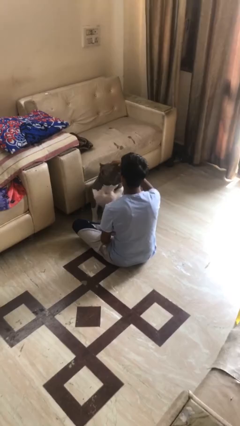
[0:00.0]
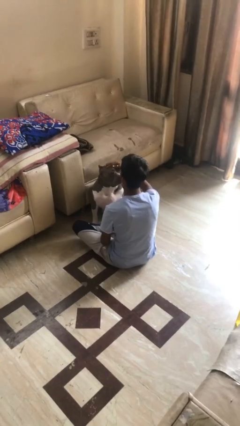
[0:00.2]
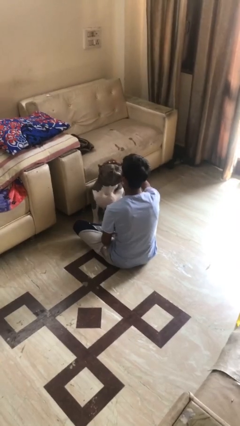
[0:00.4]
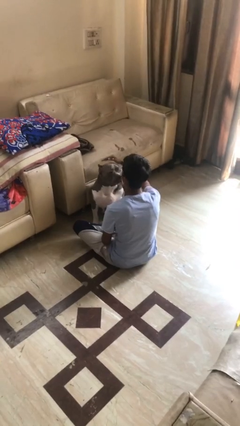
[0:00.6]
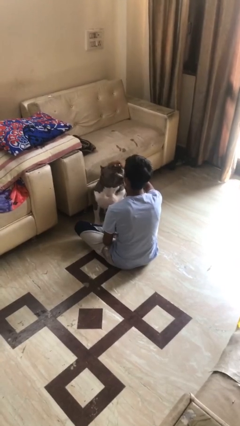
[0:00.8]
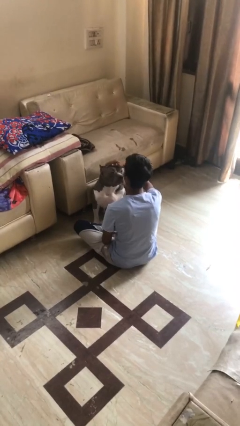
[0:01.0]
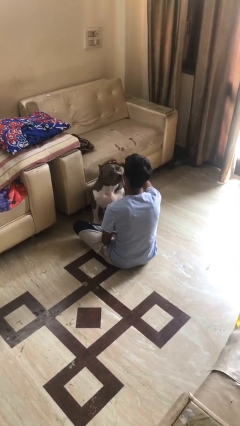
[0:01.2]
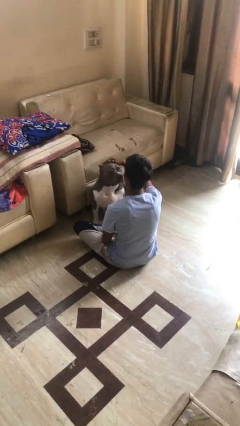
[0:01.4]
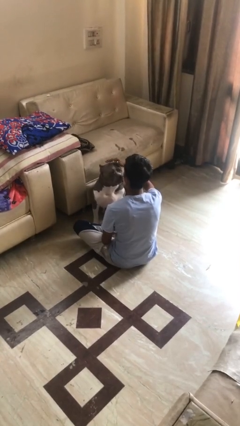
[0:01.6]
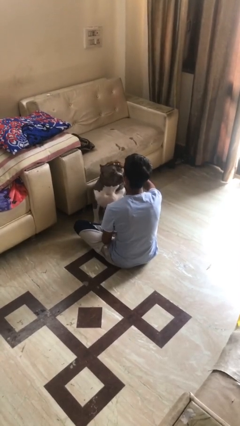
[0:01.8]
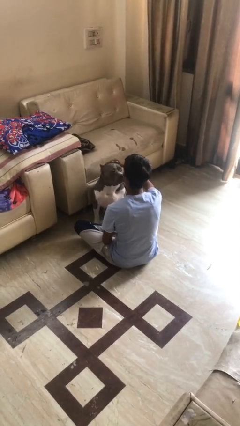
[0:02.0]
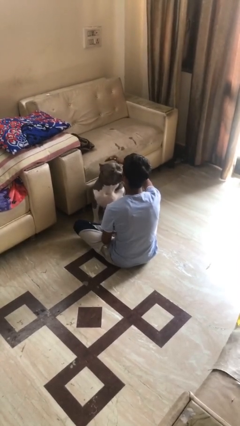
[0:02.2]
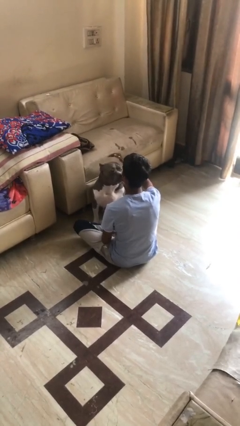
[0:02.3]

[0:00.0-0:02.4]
person pets dog

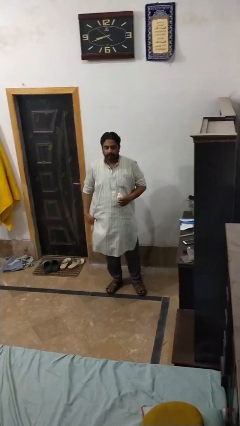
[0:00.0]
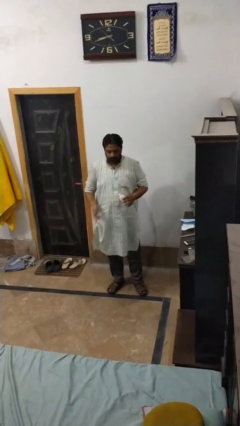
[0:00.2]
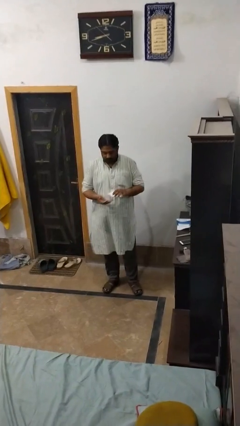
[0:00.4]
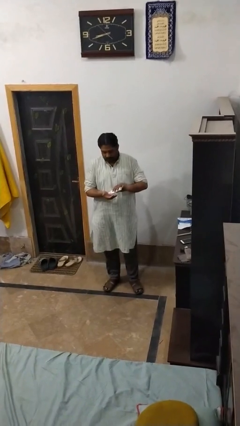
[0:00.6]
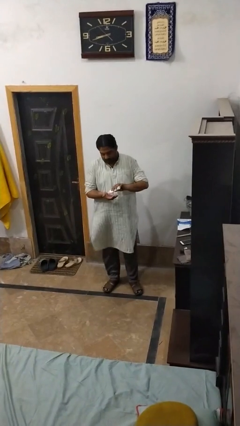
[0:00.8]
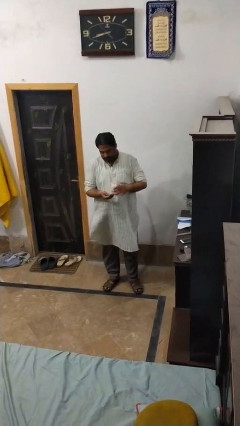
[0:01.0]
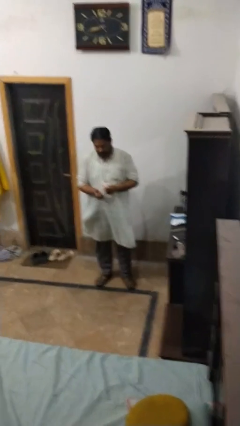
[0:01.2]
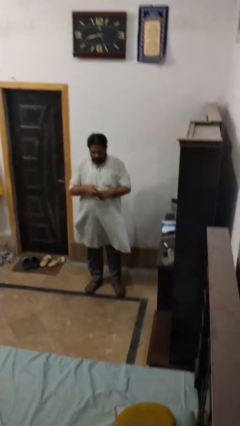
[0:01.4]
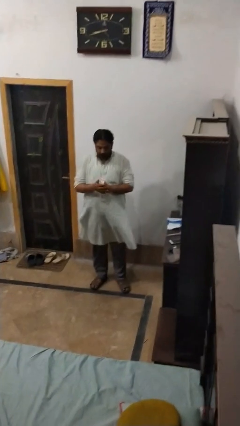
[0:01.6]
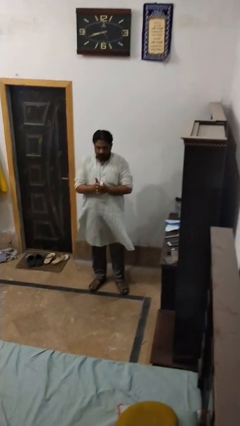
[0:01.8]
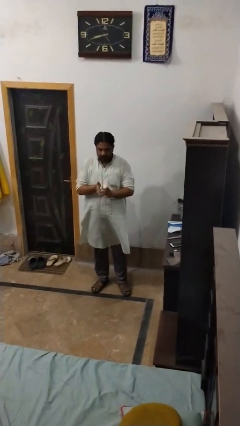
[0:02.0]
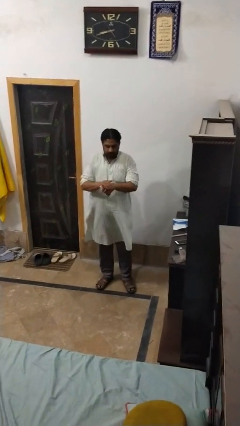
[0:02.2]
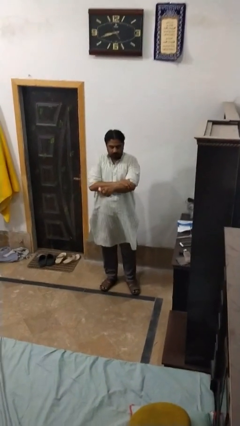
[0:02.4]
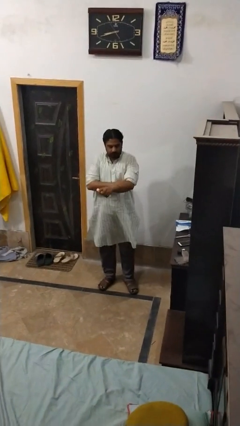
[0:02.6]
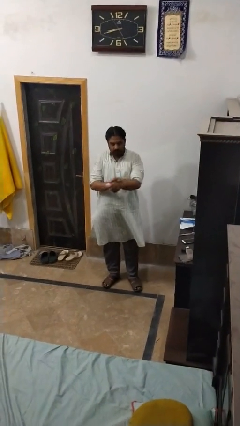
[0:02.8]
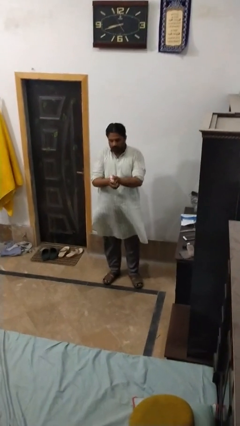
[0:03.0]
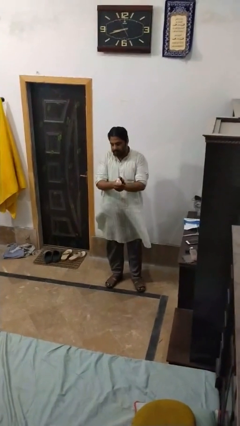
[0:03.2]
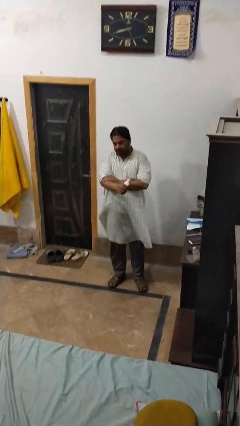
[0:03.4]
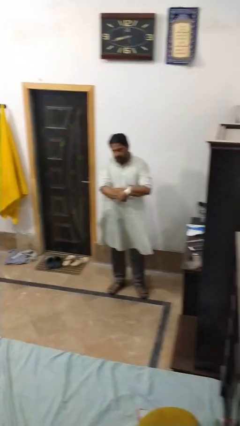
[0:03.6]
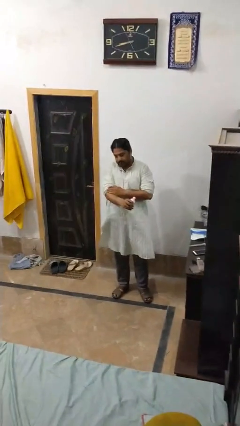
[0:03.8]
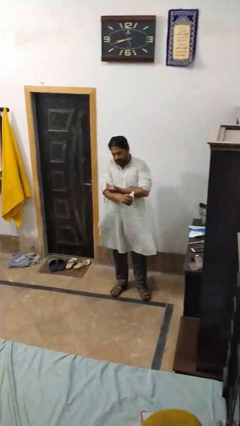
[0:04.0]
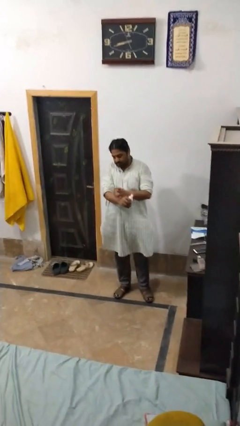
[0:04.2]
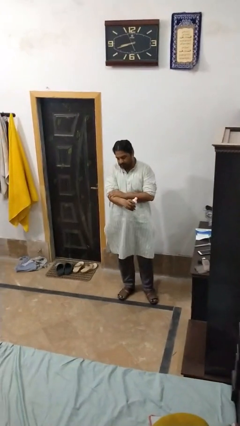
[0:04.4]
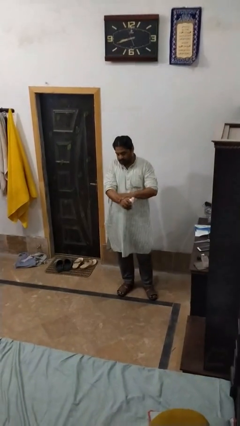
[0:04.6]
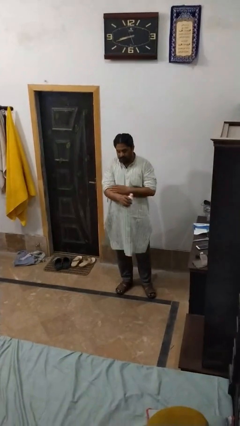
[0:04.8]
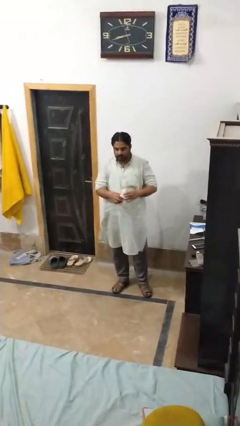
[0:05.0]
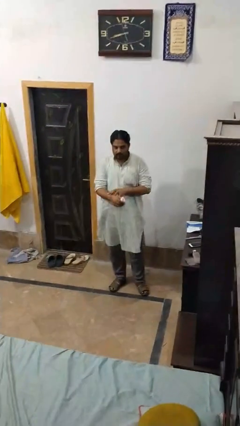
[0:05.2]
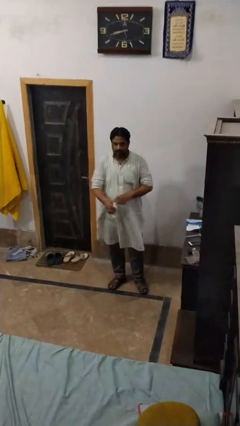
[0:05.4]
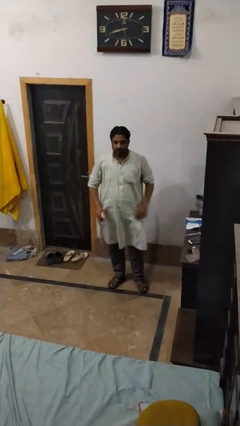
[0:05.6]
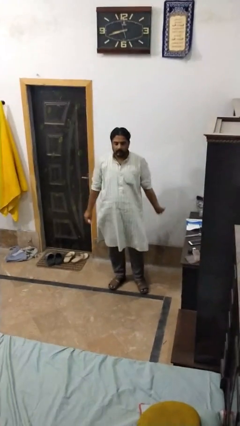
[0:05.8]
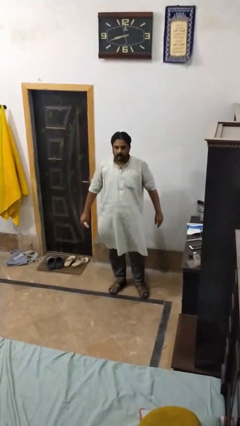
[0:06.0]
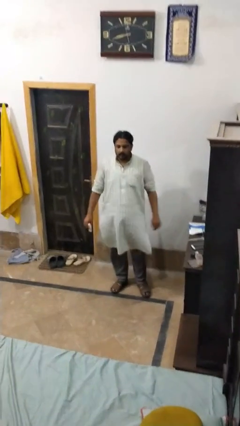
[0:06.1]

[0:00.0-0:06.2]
person applies sunscreen

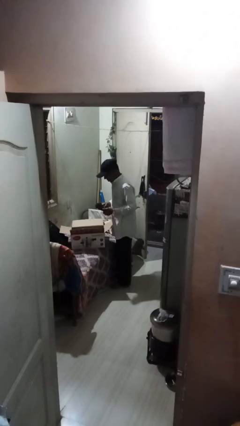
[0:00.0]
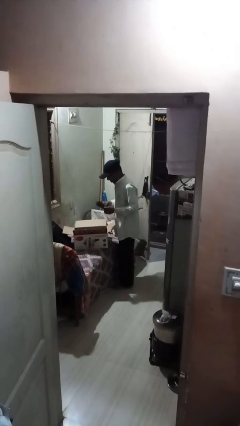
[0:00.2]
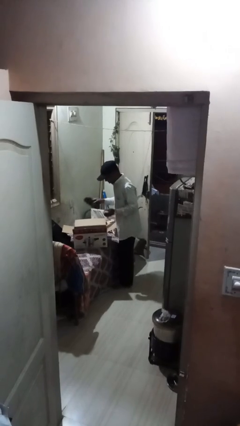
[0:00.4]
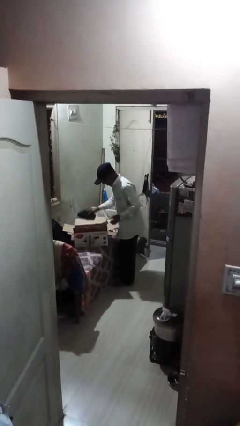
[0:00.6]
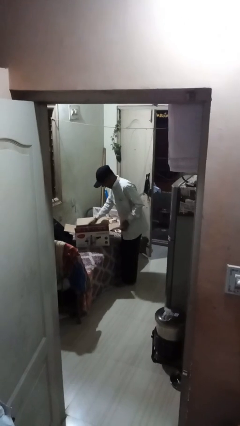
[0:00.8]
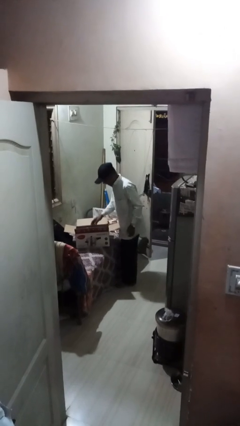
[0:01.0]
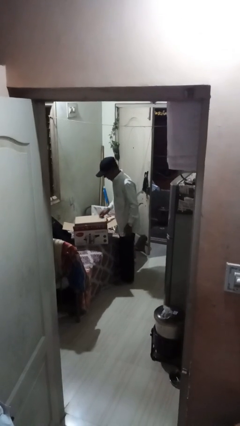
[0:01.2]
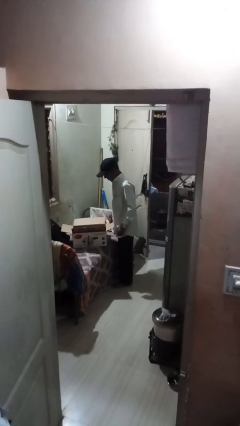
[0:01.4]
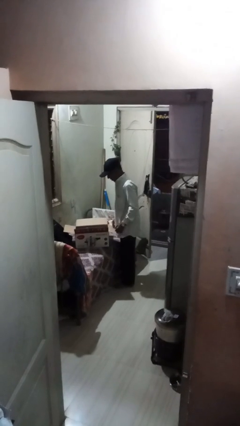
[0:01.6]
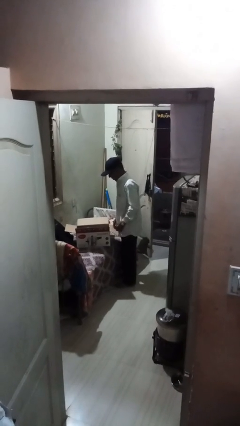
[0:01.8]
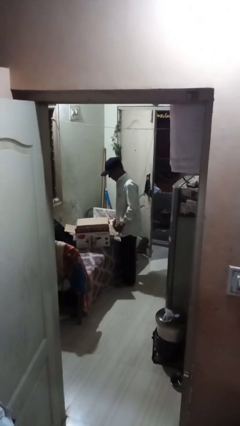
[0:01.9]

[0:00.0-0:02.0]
person puts object into box

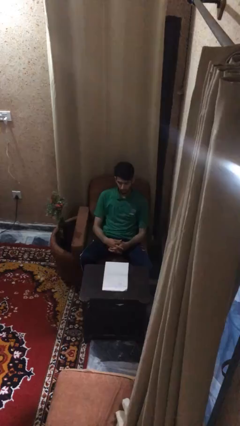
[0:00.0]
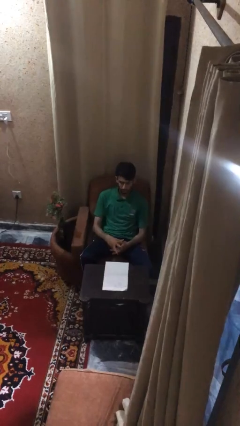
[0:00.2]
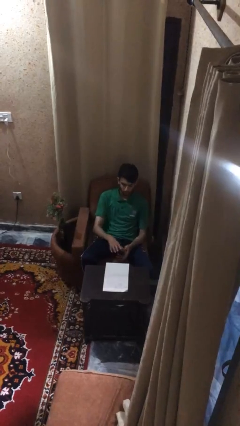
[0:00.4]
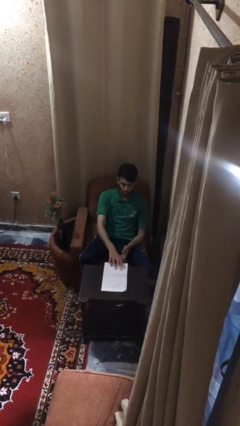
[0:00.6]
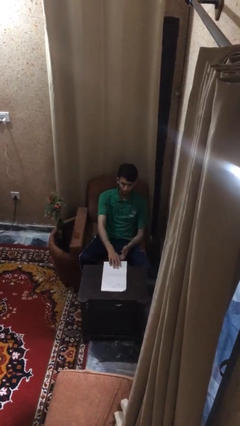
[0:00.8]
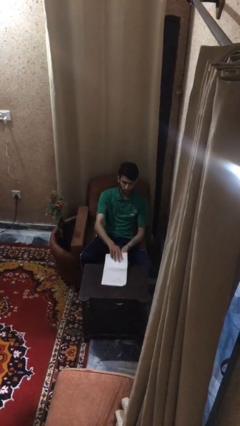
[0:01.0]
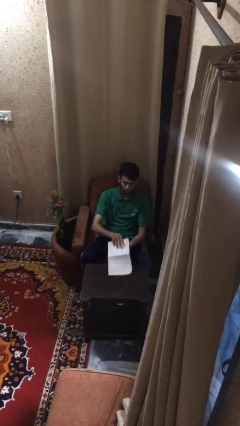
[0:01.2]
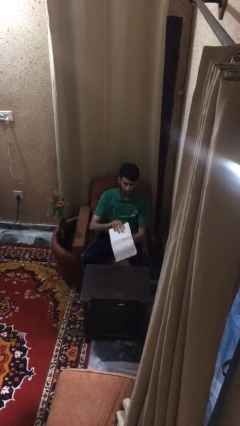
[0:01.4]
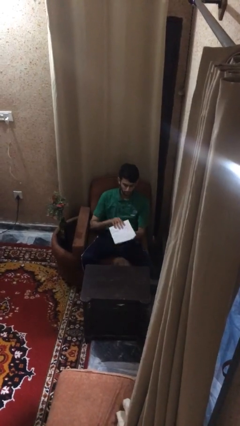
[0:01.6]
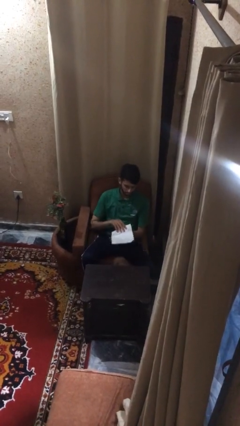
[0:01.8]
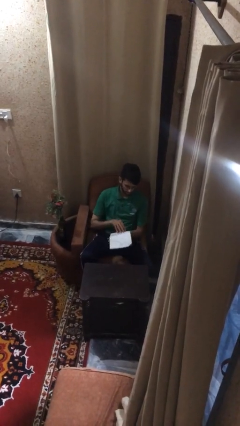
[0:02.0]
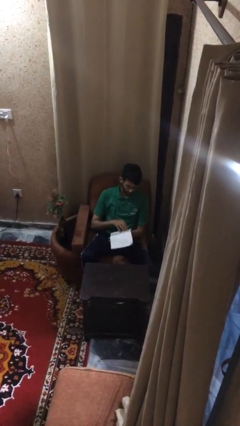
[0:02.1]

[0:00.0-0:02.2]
person picks up object from table

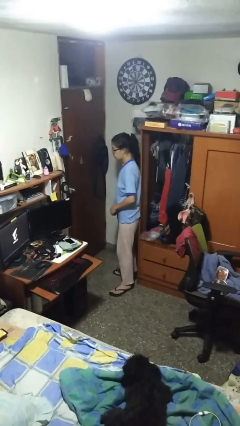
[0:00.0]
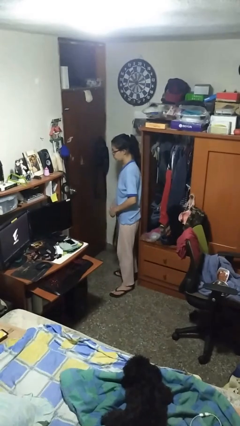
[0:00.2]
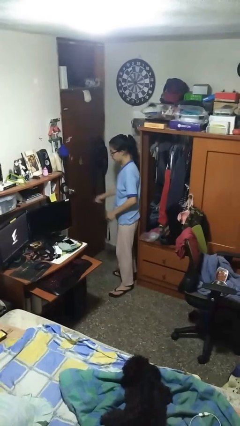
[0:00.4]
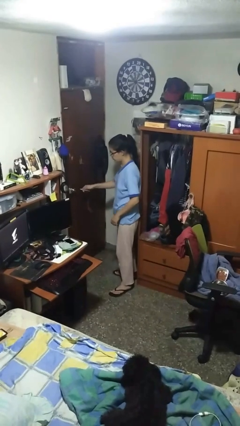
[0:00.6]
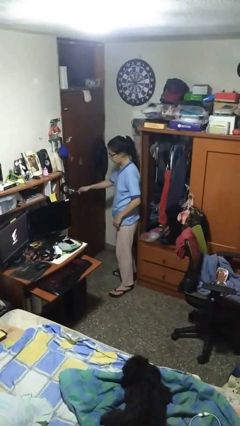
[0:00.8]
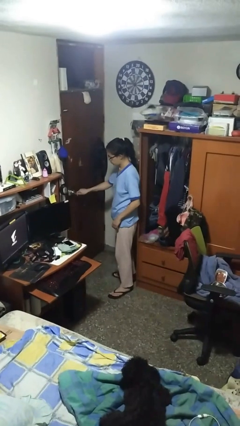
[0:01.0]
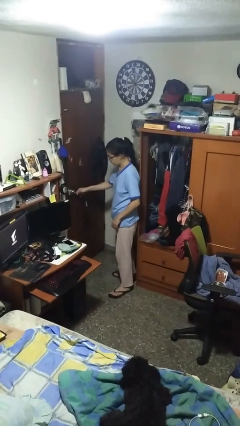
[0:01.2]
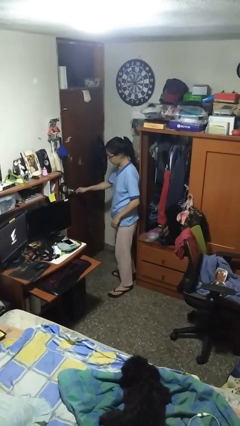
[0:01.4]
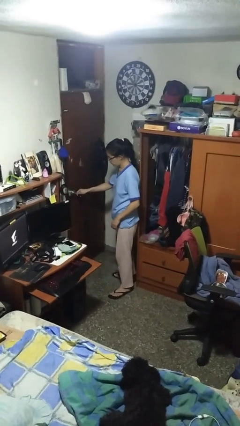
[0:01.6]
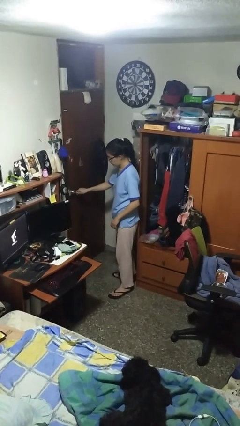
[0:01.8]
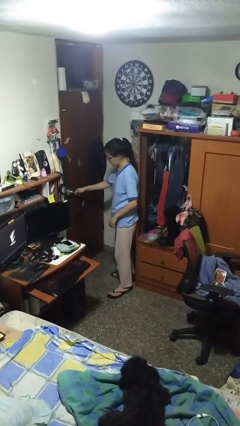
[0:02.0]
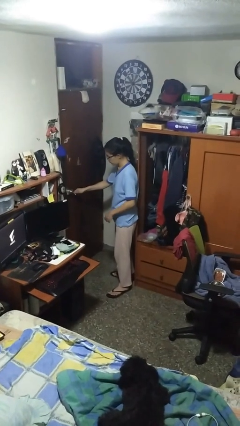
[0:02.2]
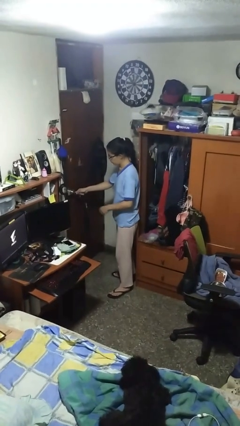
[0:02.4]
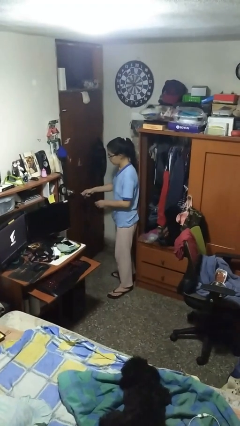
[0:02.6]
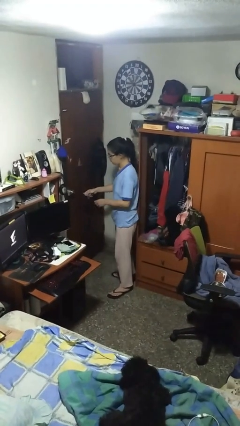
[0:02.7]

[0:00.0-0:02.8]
person unlocks door with keys

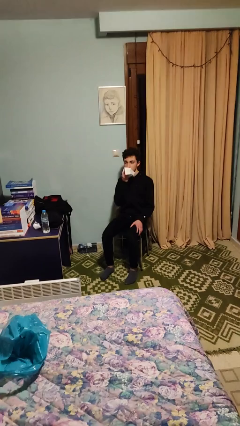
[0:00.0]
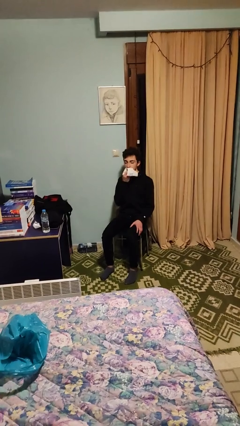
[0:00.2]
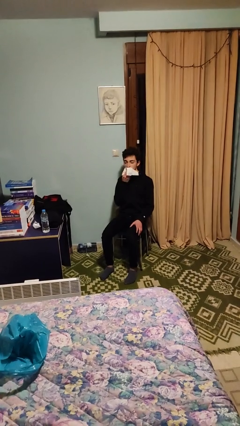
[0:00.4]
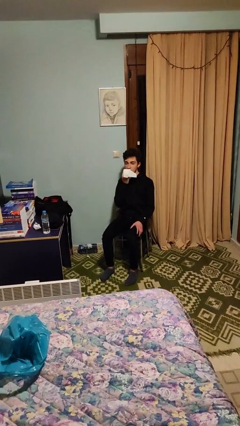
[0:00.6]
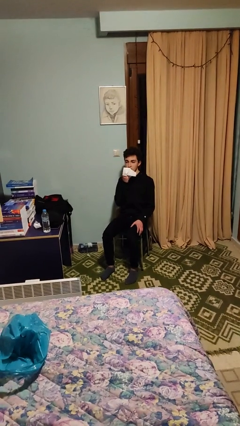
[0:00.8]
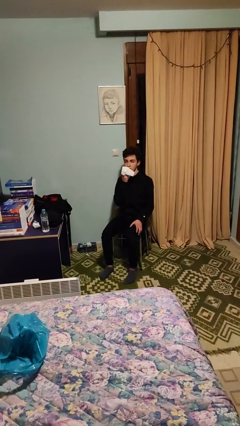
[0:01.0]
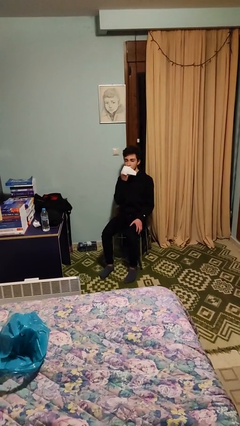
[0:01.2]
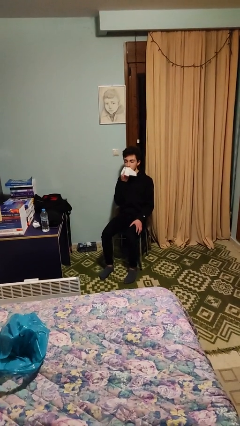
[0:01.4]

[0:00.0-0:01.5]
person wipes mouth with napkin

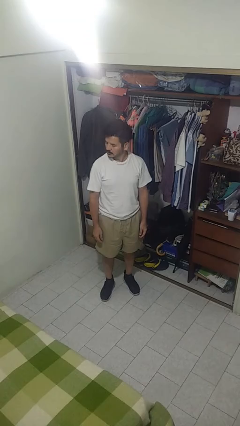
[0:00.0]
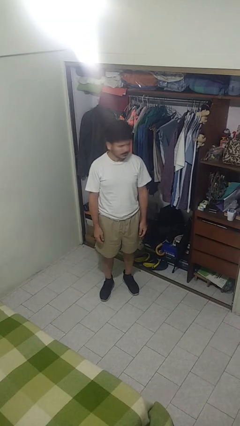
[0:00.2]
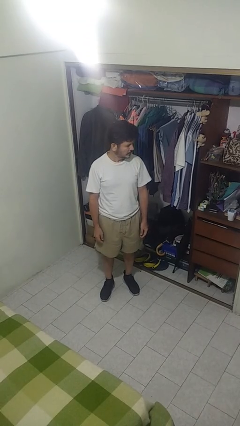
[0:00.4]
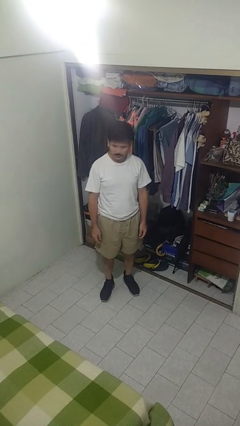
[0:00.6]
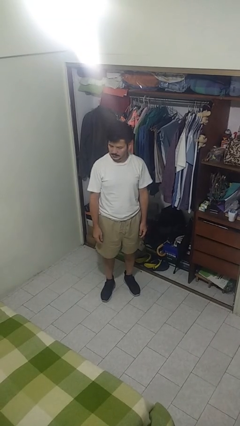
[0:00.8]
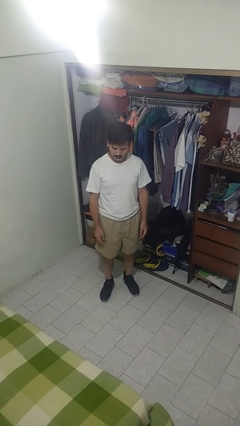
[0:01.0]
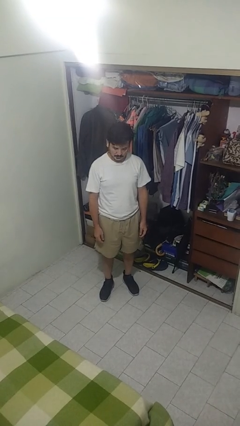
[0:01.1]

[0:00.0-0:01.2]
person shakes head
